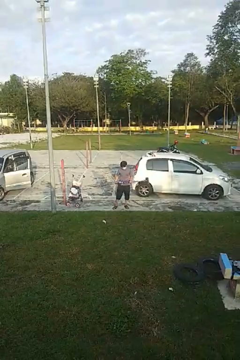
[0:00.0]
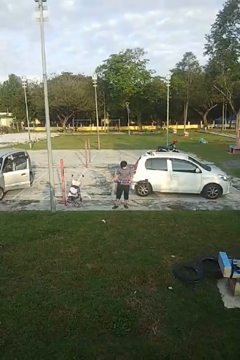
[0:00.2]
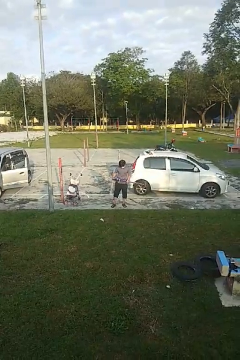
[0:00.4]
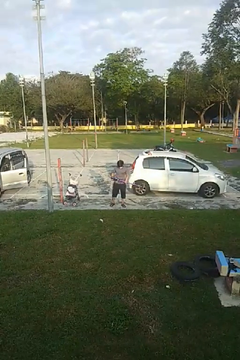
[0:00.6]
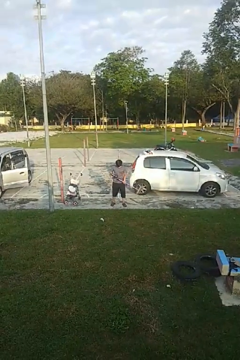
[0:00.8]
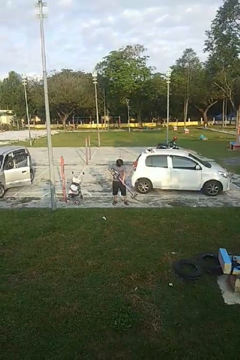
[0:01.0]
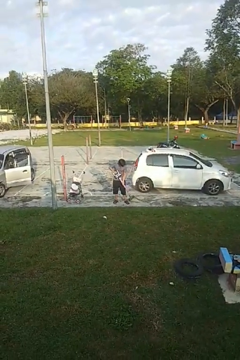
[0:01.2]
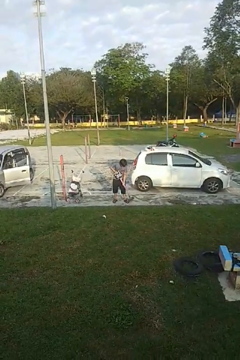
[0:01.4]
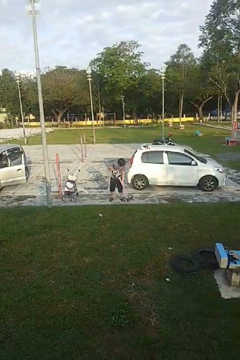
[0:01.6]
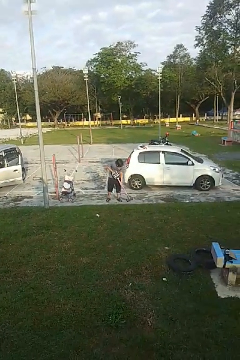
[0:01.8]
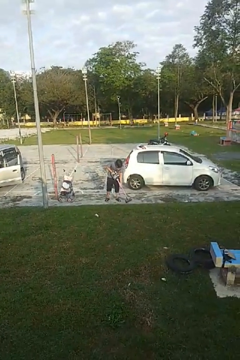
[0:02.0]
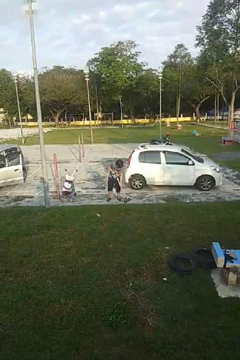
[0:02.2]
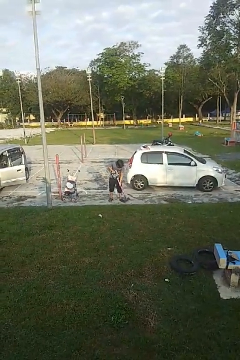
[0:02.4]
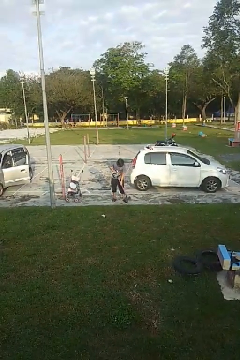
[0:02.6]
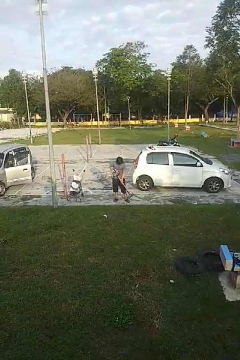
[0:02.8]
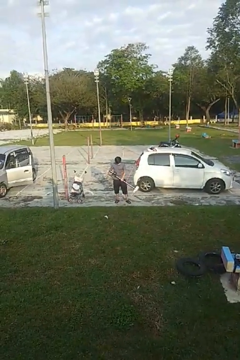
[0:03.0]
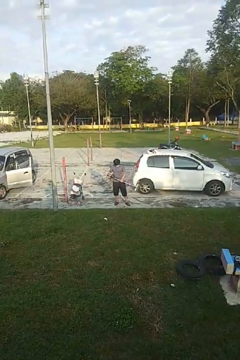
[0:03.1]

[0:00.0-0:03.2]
person vacuums carpet

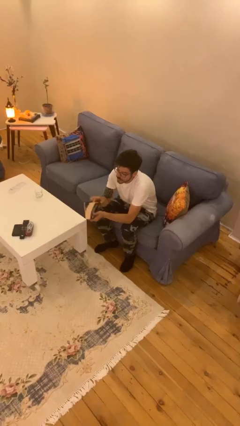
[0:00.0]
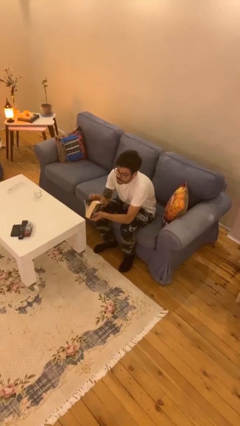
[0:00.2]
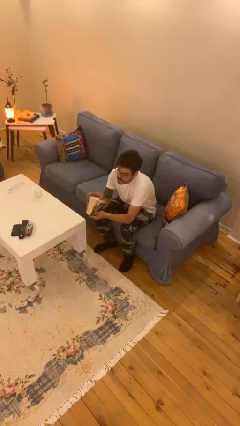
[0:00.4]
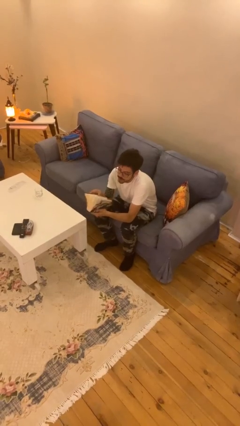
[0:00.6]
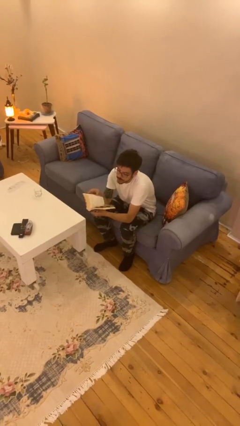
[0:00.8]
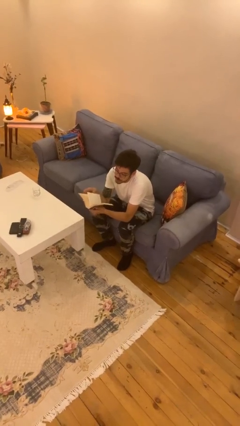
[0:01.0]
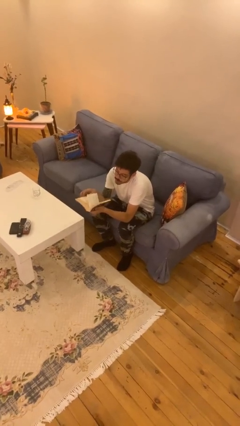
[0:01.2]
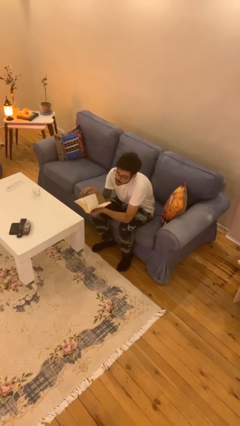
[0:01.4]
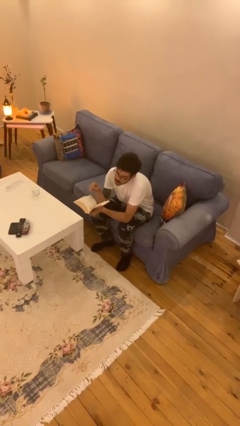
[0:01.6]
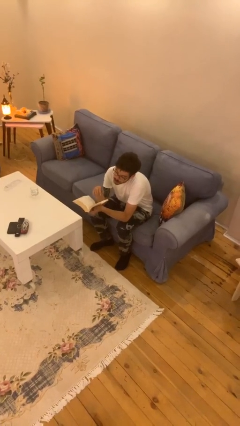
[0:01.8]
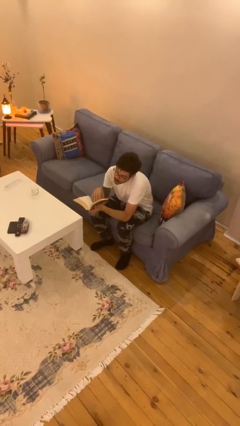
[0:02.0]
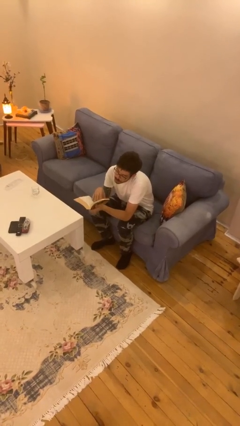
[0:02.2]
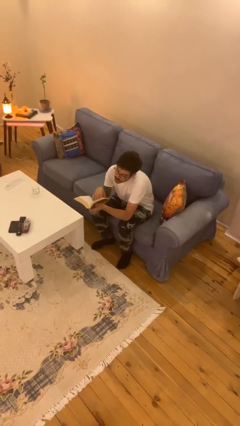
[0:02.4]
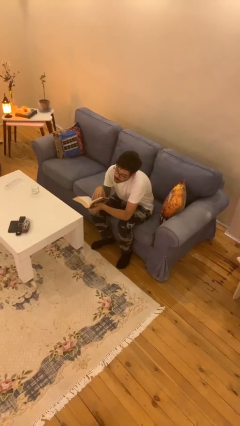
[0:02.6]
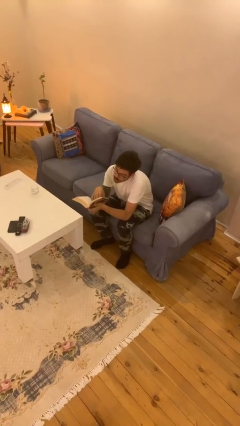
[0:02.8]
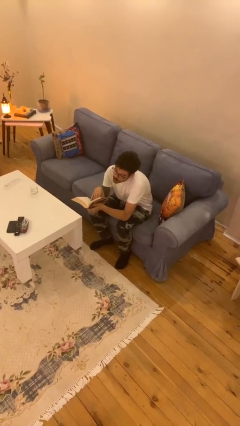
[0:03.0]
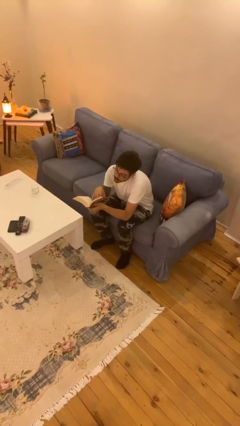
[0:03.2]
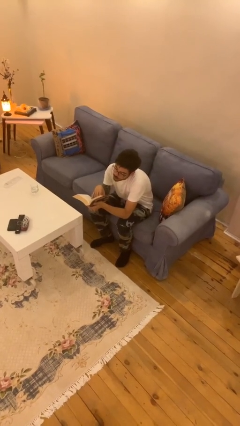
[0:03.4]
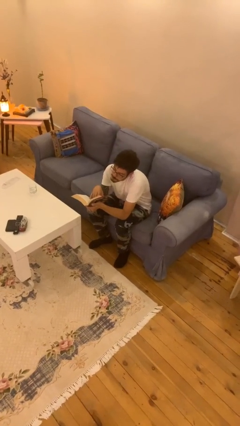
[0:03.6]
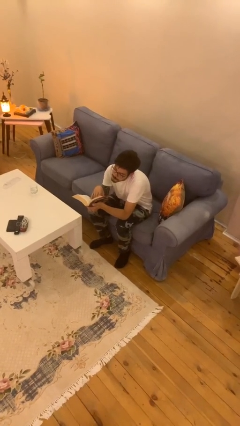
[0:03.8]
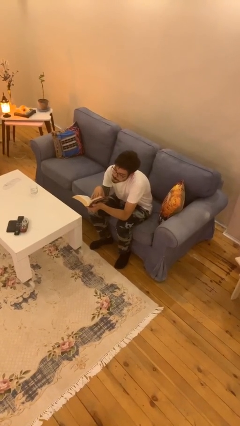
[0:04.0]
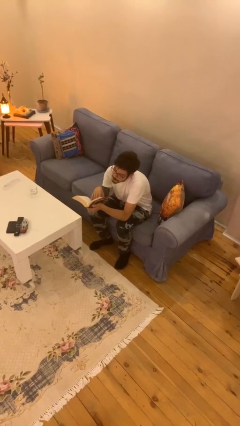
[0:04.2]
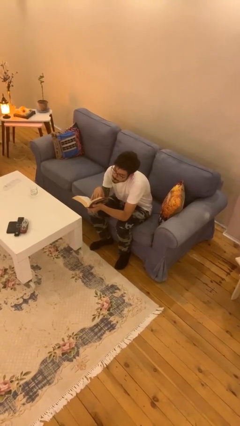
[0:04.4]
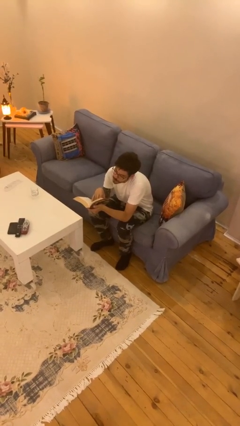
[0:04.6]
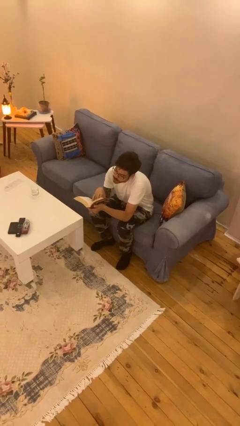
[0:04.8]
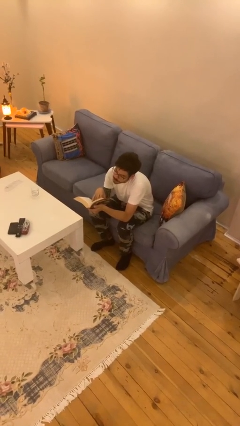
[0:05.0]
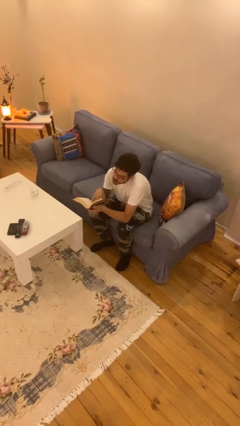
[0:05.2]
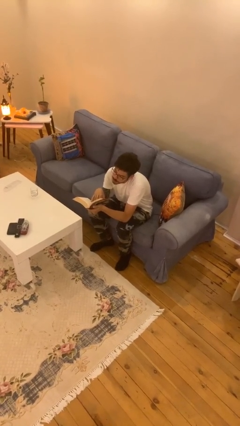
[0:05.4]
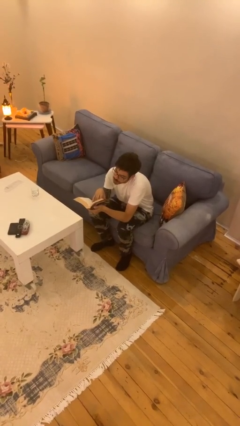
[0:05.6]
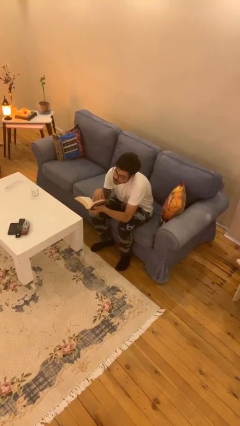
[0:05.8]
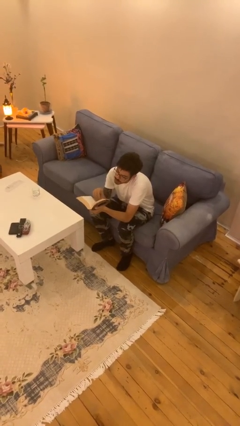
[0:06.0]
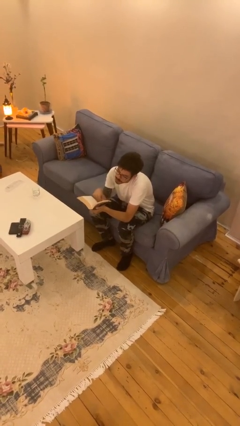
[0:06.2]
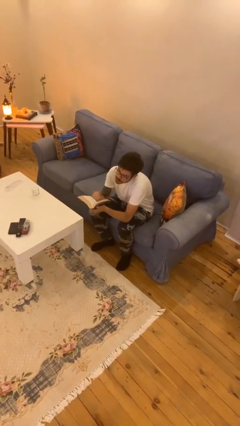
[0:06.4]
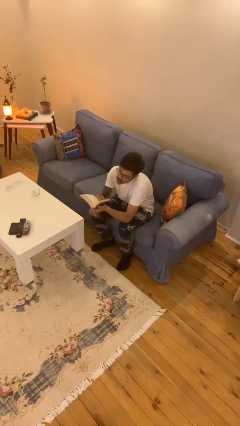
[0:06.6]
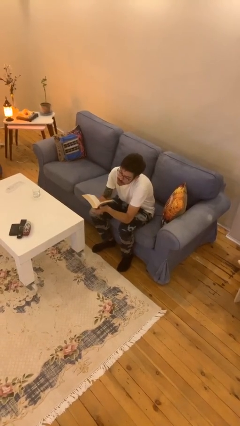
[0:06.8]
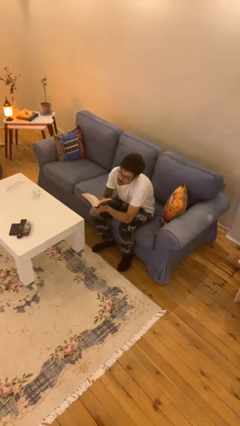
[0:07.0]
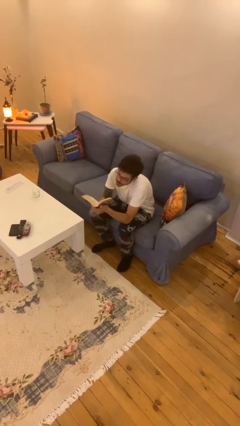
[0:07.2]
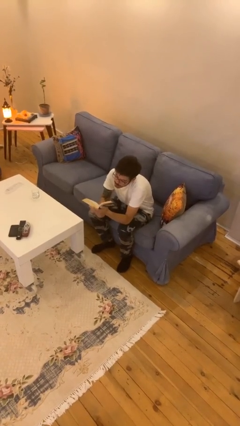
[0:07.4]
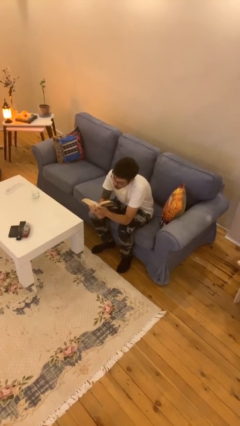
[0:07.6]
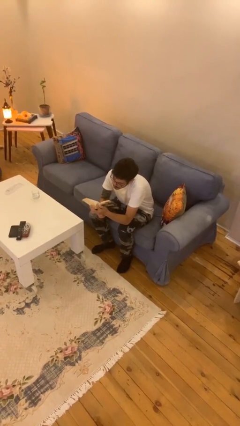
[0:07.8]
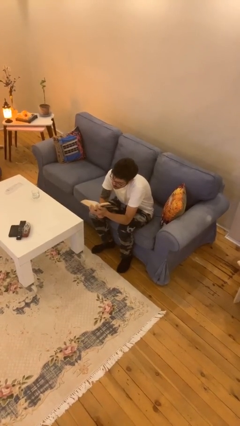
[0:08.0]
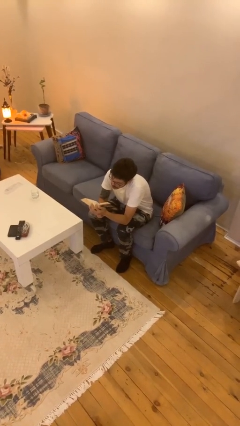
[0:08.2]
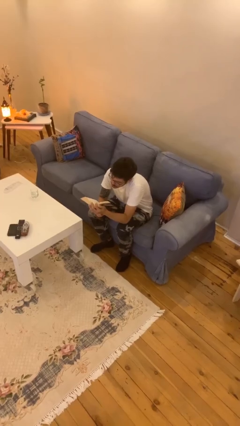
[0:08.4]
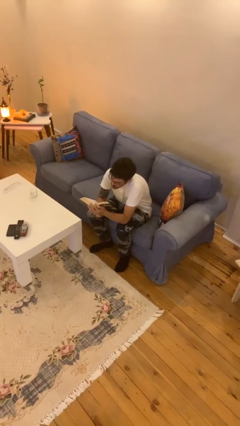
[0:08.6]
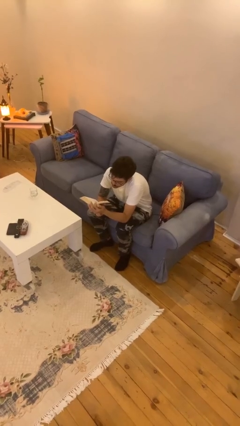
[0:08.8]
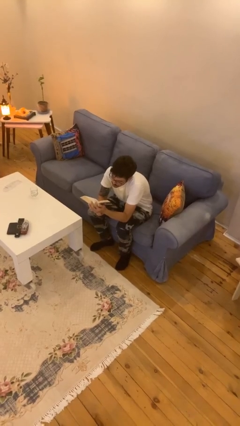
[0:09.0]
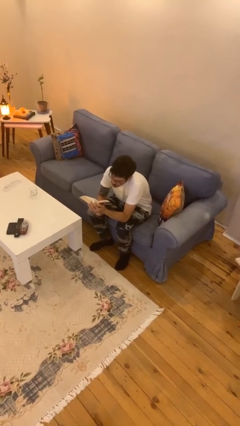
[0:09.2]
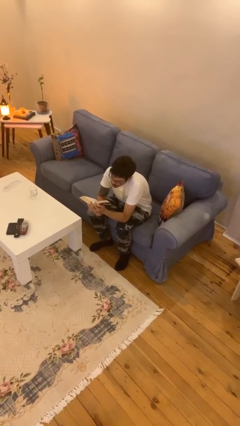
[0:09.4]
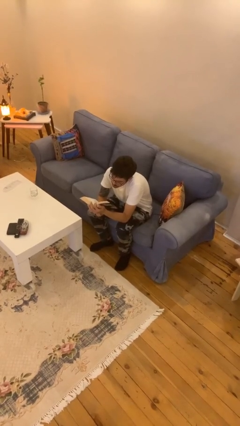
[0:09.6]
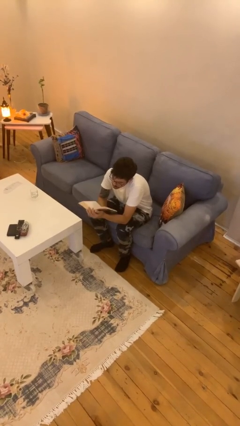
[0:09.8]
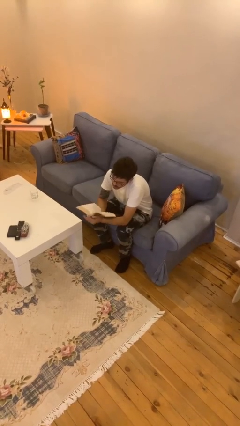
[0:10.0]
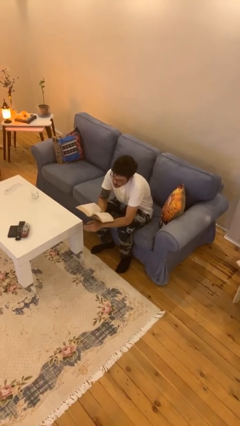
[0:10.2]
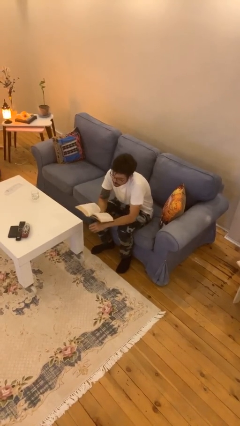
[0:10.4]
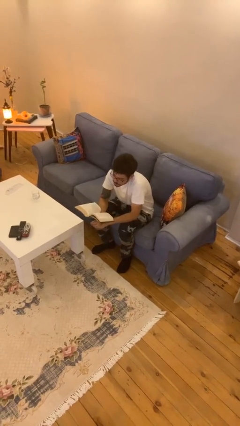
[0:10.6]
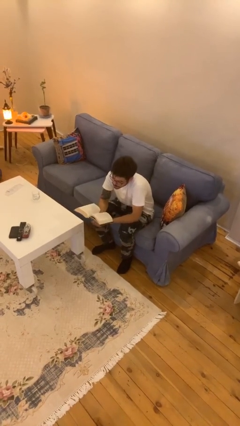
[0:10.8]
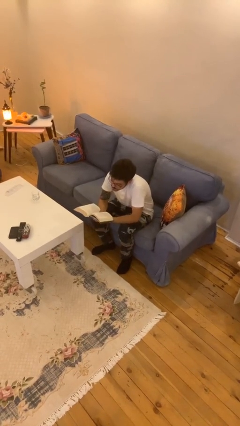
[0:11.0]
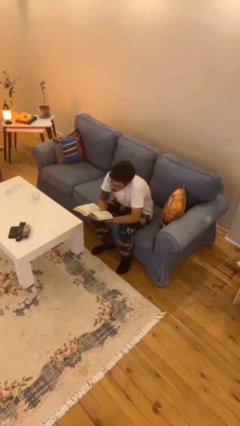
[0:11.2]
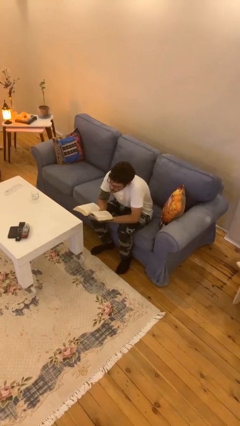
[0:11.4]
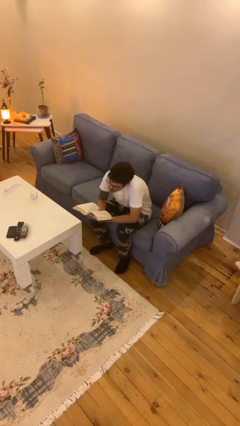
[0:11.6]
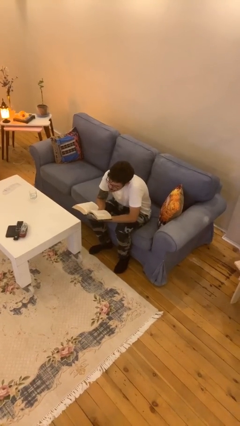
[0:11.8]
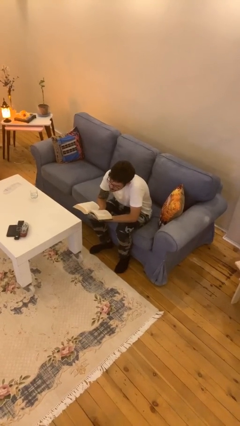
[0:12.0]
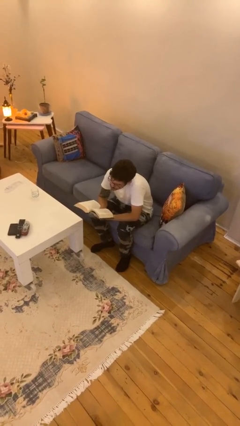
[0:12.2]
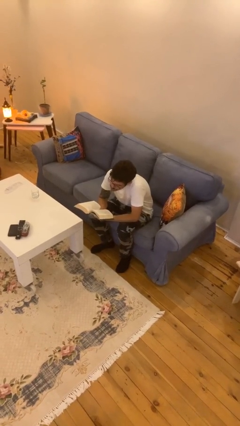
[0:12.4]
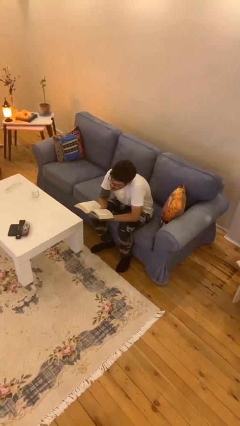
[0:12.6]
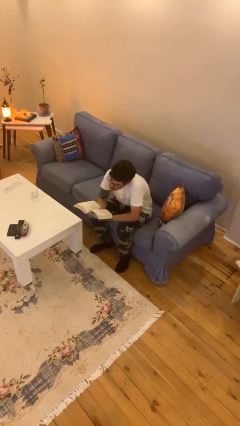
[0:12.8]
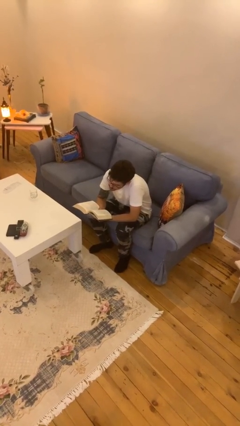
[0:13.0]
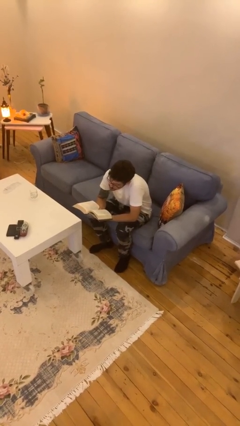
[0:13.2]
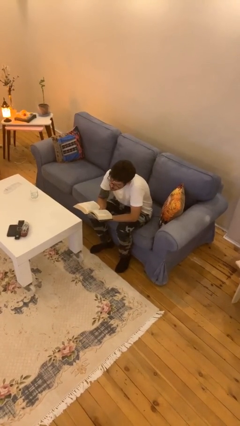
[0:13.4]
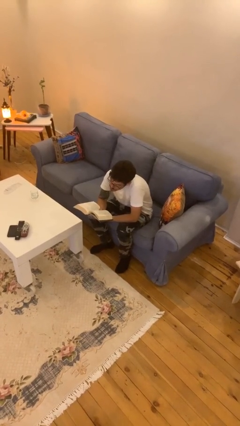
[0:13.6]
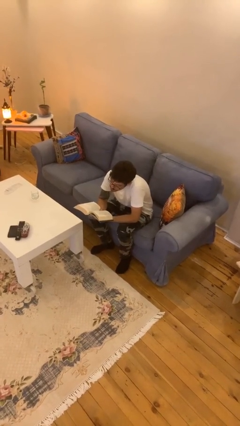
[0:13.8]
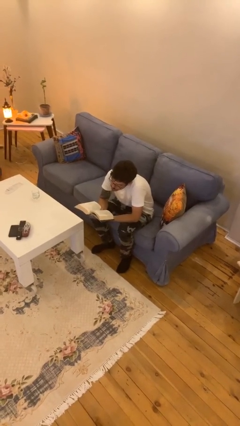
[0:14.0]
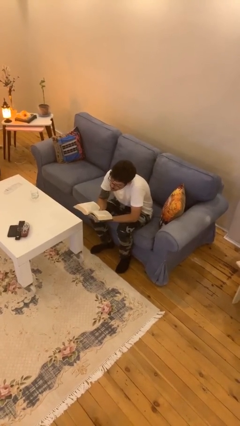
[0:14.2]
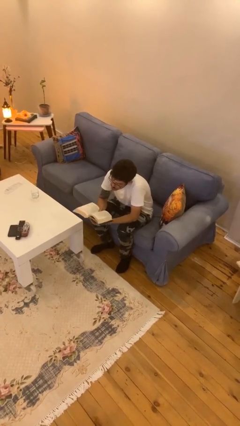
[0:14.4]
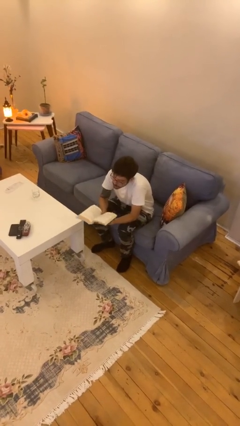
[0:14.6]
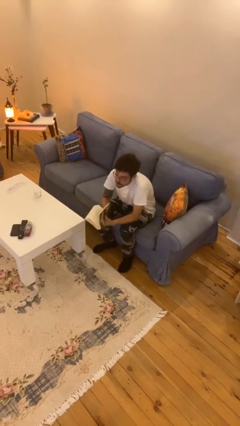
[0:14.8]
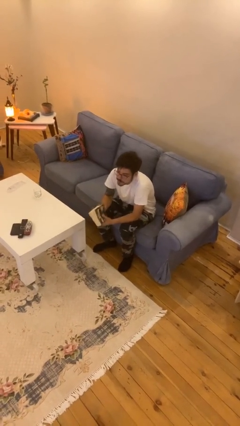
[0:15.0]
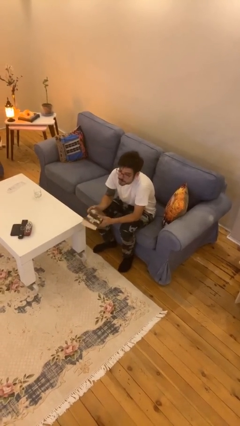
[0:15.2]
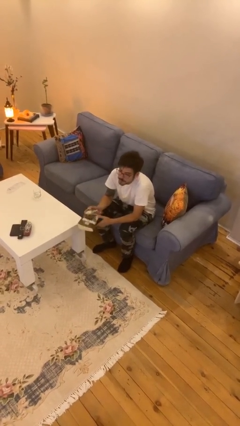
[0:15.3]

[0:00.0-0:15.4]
person reads document
